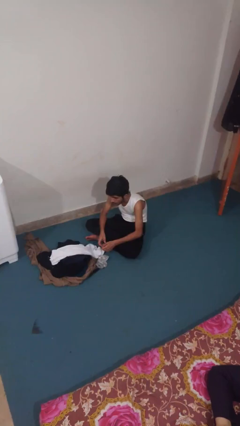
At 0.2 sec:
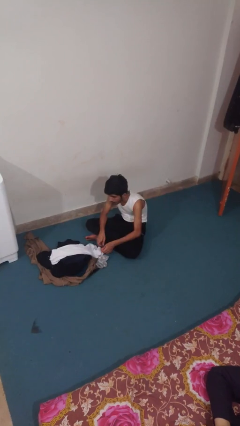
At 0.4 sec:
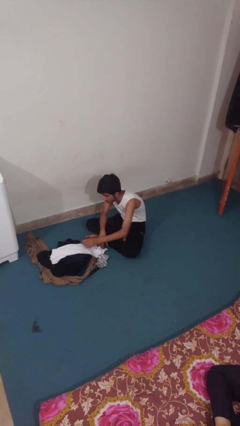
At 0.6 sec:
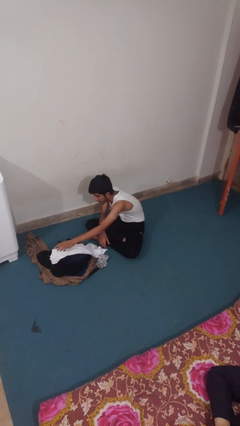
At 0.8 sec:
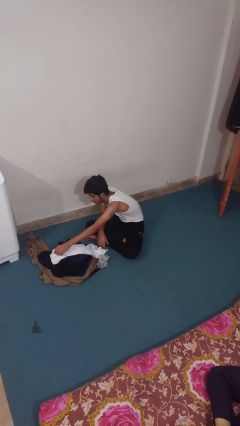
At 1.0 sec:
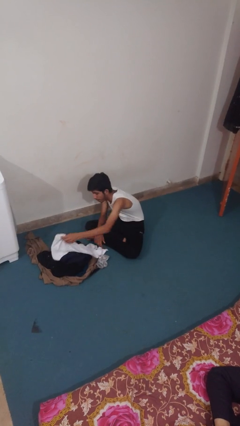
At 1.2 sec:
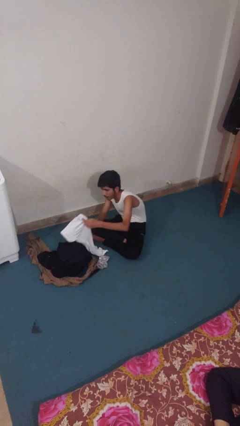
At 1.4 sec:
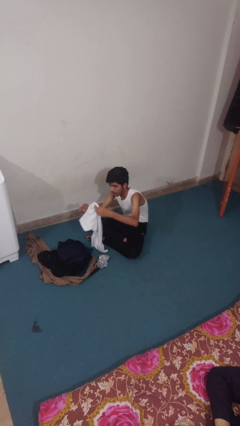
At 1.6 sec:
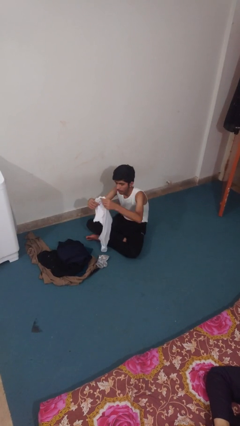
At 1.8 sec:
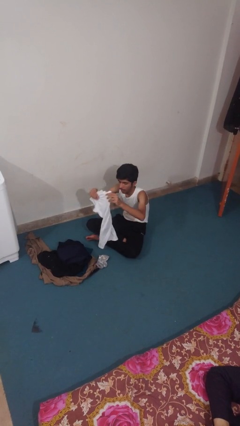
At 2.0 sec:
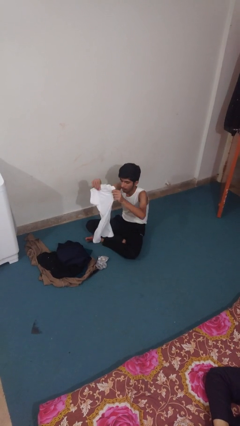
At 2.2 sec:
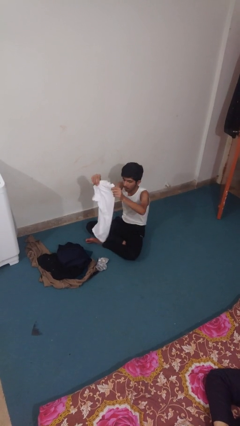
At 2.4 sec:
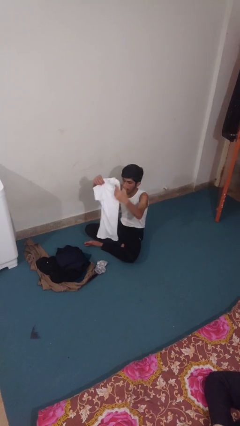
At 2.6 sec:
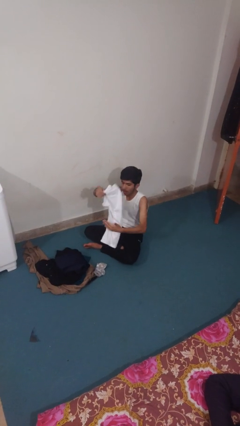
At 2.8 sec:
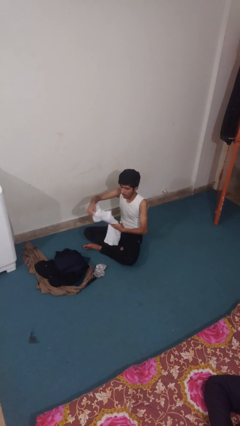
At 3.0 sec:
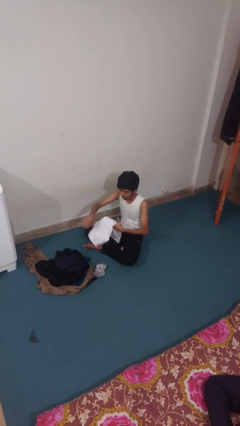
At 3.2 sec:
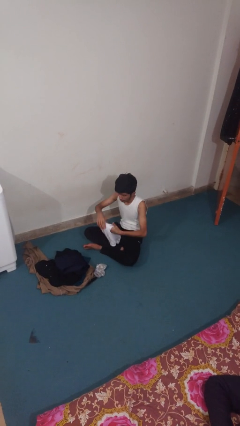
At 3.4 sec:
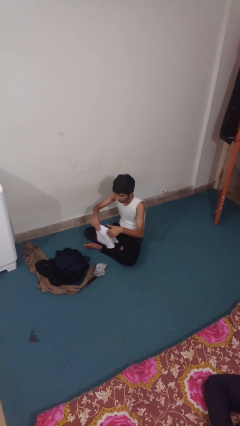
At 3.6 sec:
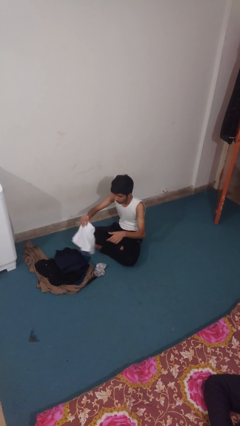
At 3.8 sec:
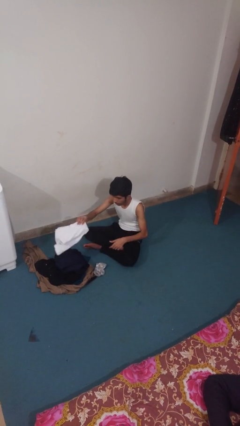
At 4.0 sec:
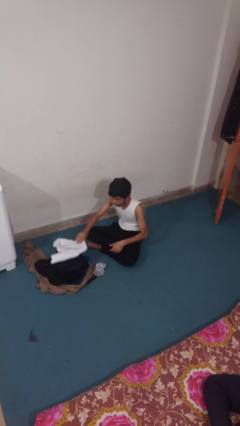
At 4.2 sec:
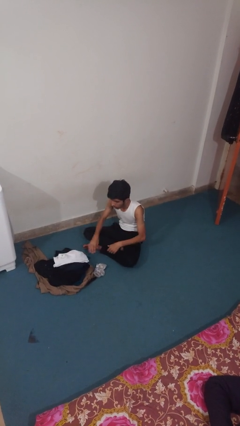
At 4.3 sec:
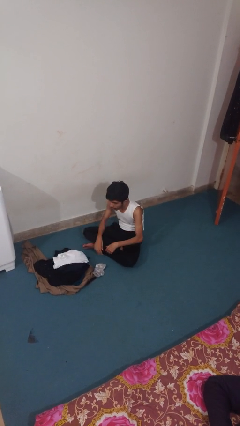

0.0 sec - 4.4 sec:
person folds shirt

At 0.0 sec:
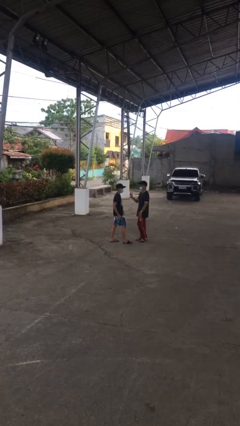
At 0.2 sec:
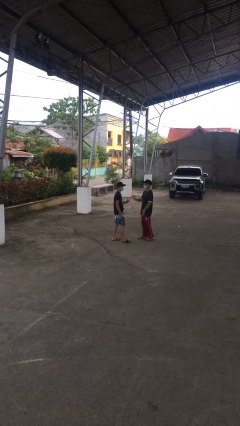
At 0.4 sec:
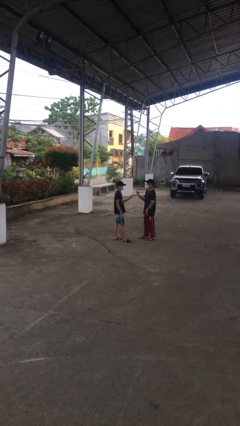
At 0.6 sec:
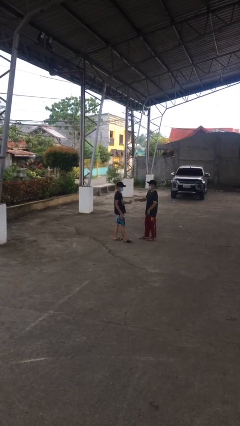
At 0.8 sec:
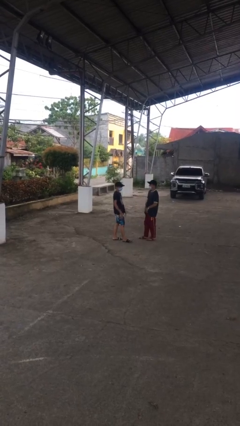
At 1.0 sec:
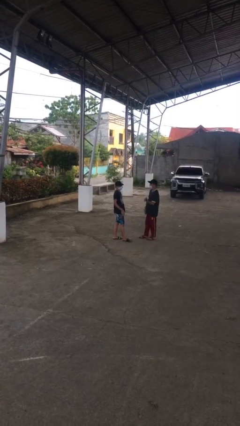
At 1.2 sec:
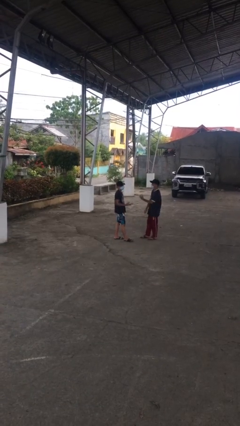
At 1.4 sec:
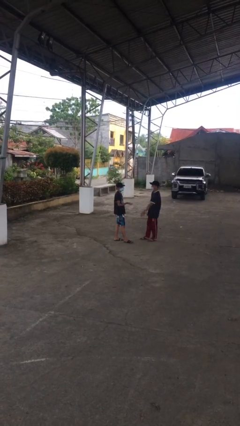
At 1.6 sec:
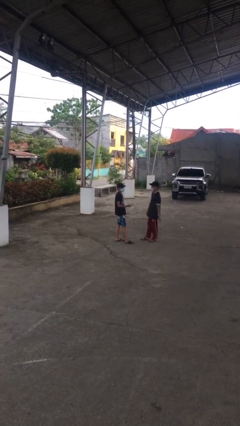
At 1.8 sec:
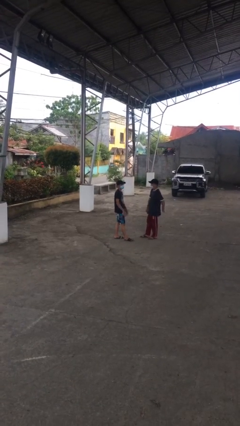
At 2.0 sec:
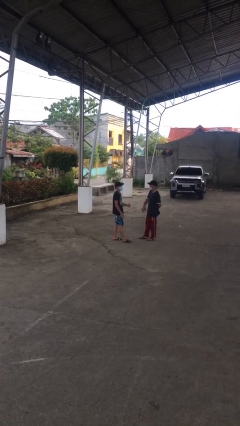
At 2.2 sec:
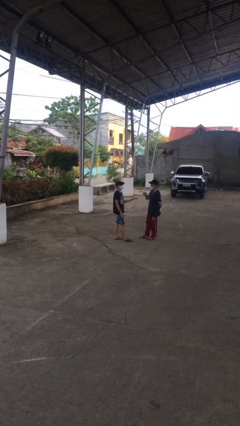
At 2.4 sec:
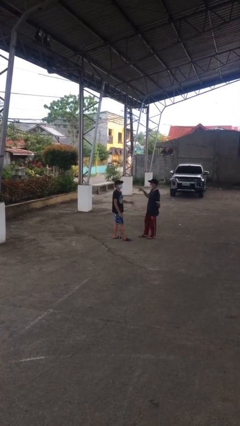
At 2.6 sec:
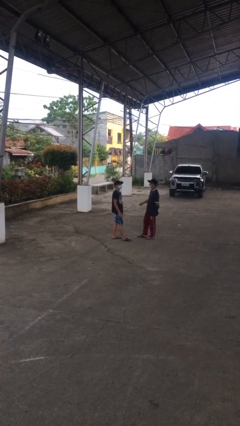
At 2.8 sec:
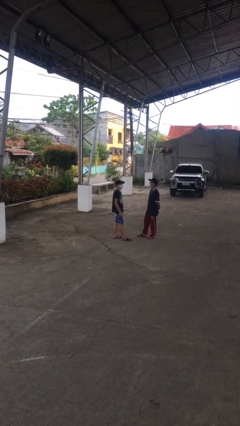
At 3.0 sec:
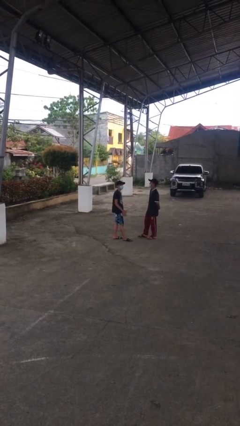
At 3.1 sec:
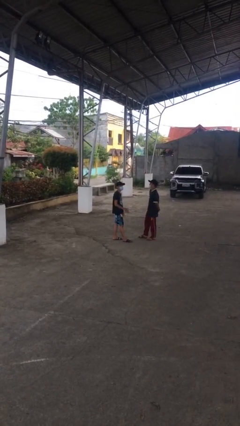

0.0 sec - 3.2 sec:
person talks to person

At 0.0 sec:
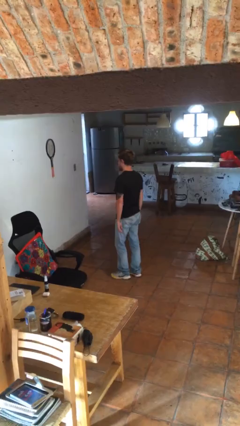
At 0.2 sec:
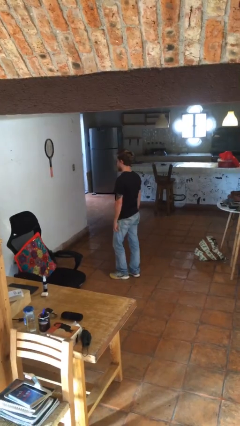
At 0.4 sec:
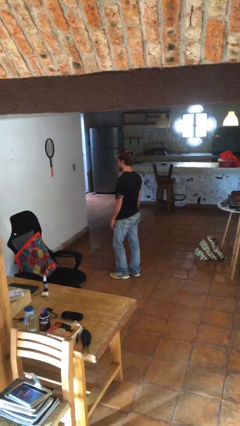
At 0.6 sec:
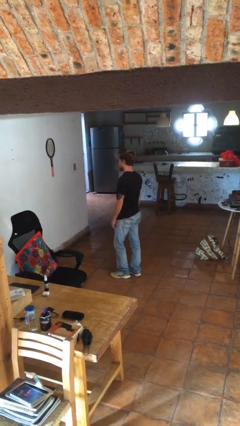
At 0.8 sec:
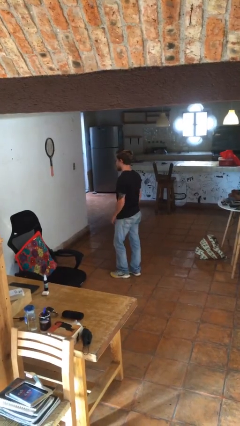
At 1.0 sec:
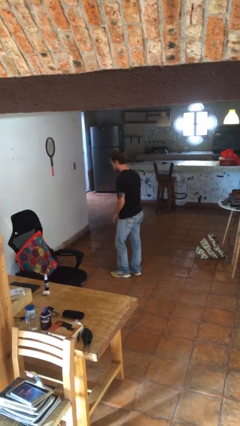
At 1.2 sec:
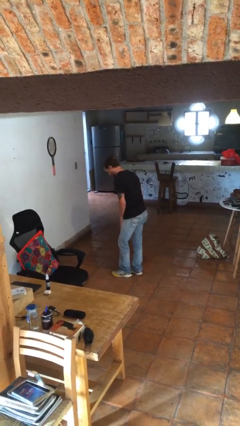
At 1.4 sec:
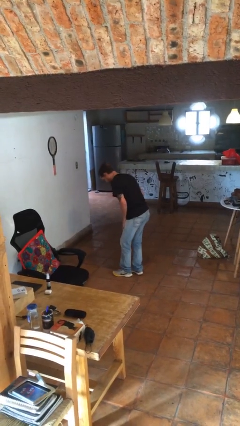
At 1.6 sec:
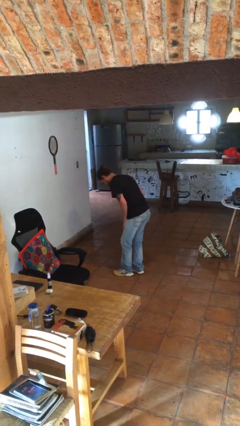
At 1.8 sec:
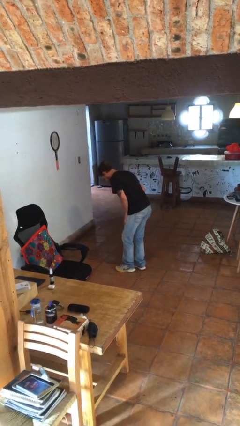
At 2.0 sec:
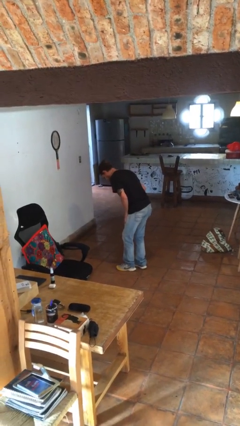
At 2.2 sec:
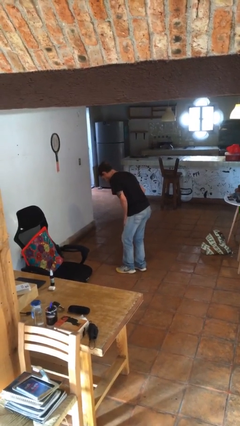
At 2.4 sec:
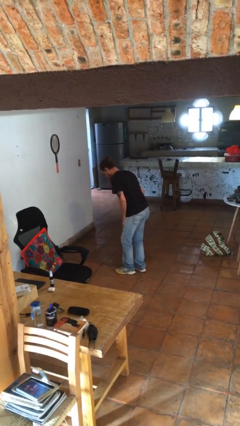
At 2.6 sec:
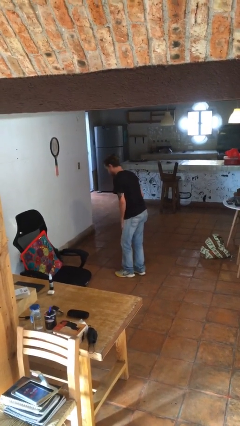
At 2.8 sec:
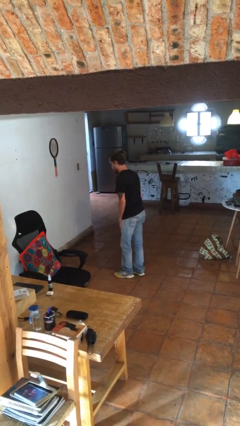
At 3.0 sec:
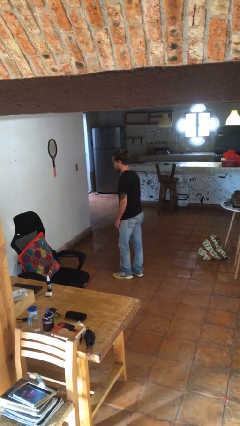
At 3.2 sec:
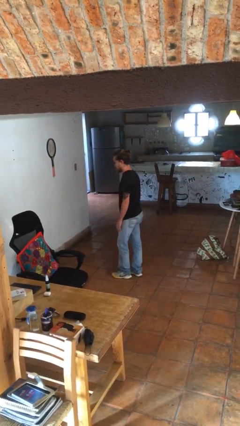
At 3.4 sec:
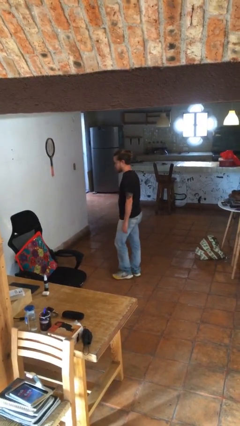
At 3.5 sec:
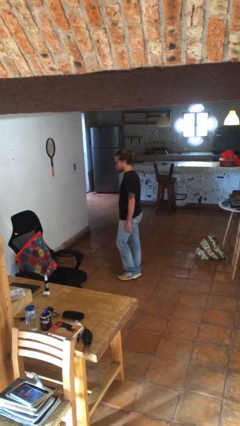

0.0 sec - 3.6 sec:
person bows

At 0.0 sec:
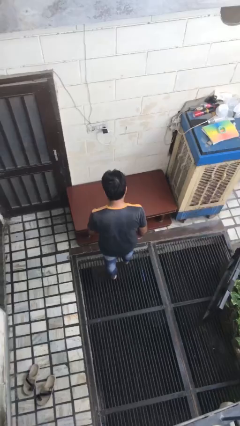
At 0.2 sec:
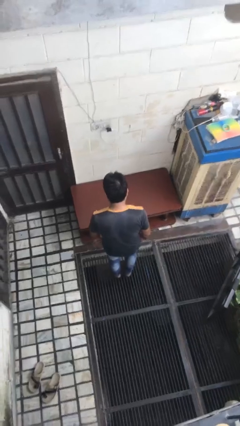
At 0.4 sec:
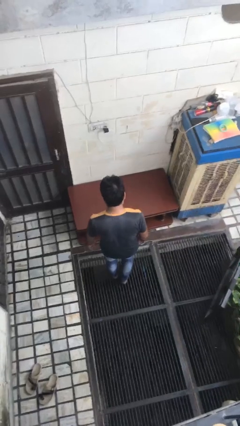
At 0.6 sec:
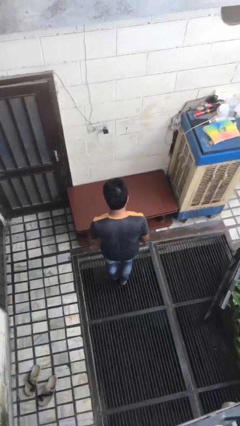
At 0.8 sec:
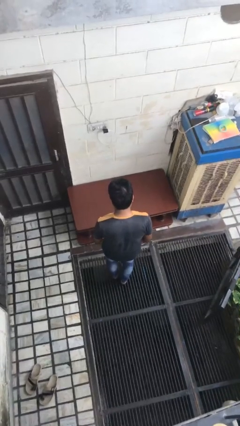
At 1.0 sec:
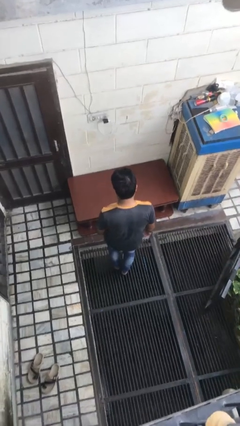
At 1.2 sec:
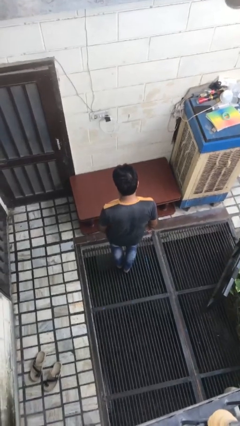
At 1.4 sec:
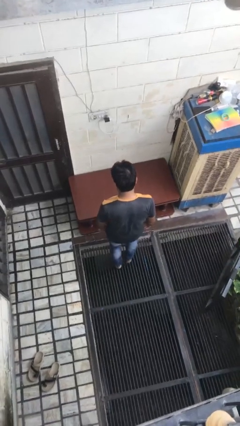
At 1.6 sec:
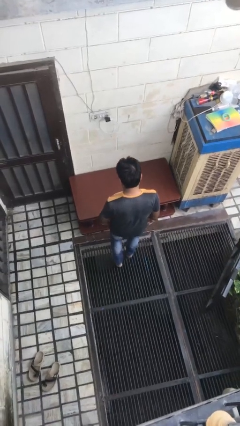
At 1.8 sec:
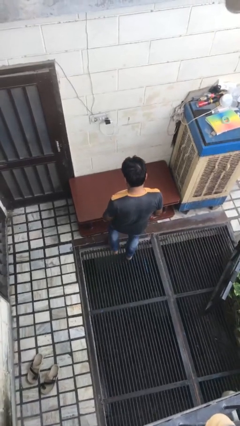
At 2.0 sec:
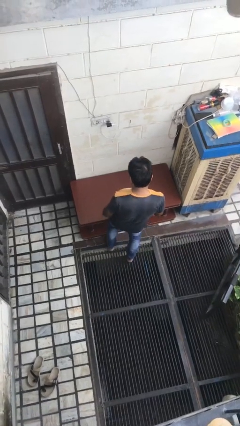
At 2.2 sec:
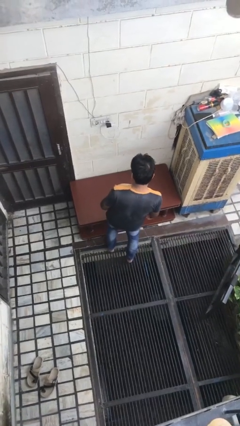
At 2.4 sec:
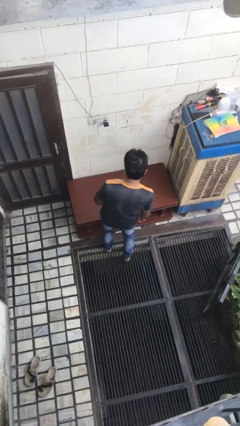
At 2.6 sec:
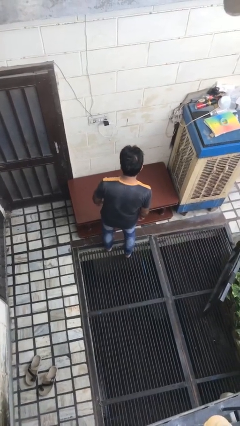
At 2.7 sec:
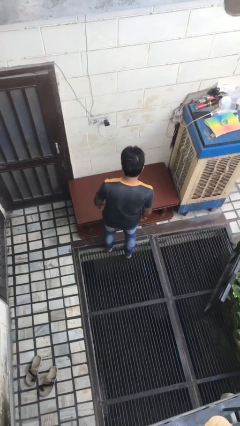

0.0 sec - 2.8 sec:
person stubs toe

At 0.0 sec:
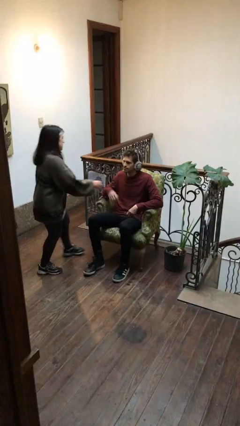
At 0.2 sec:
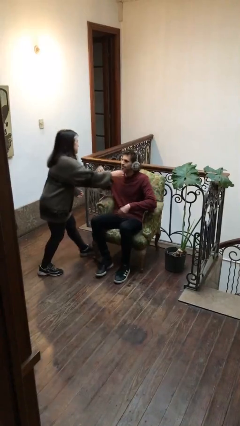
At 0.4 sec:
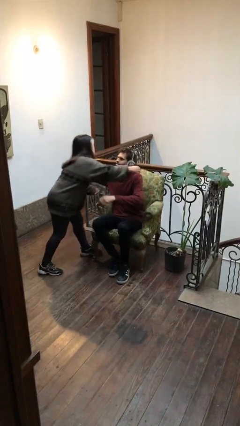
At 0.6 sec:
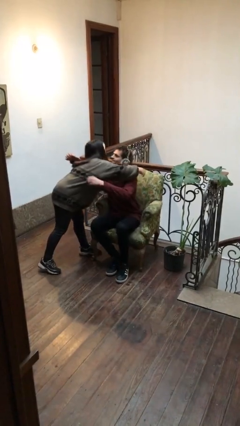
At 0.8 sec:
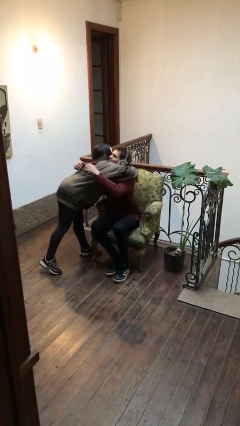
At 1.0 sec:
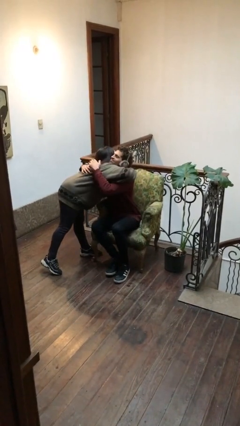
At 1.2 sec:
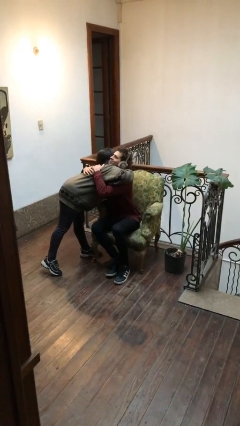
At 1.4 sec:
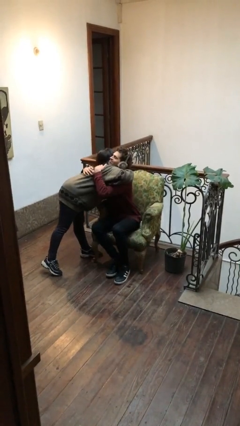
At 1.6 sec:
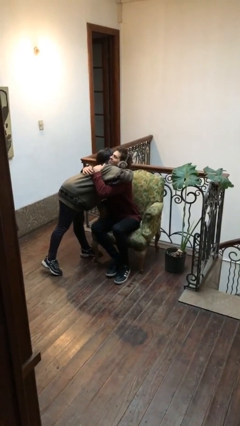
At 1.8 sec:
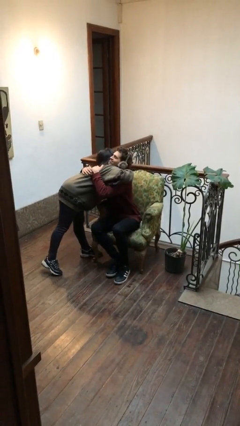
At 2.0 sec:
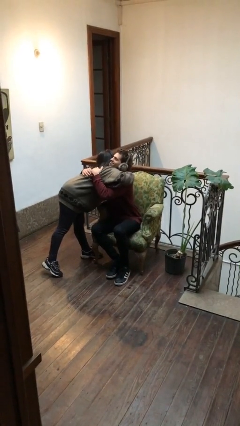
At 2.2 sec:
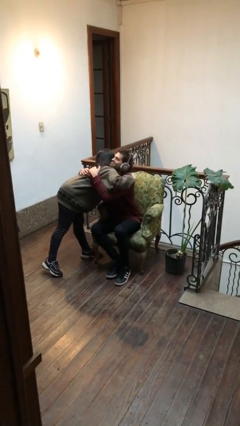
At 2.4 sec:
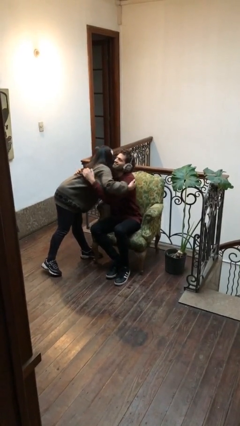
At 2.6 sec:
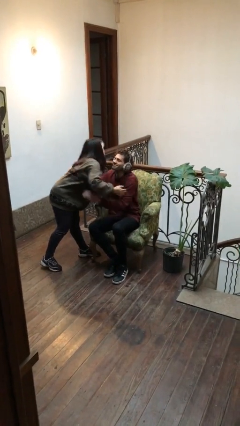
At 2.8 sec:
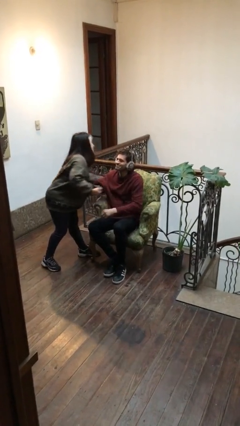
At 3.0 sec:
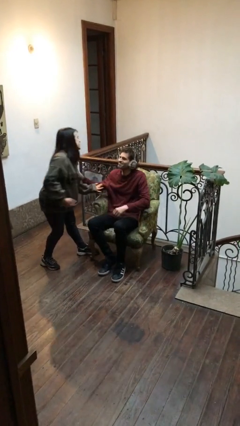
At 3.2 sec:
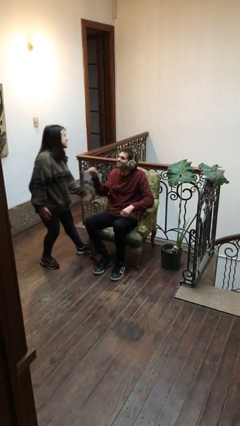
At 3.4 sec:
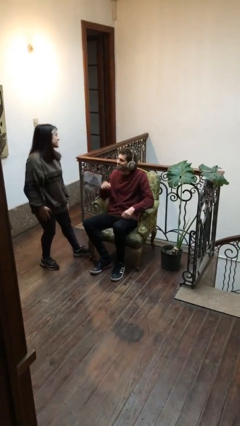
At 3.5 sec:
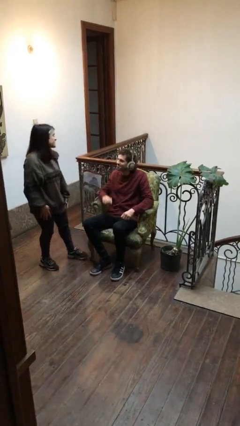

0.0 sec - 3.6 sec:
person embraces person
